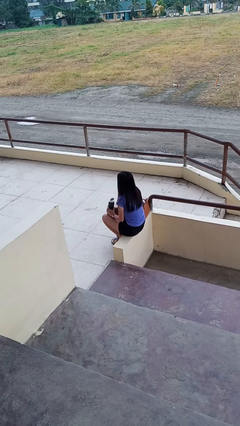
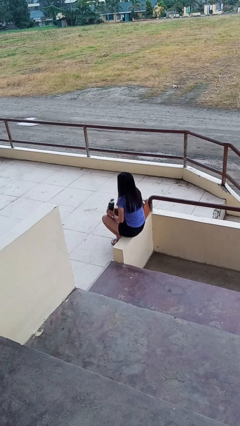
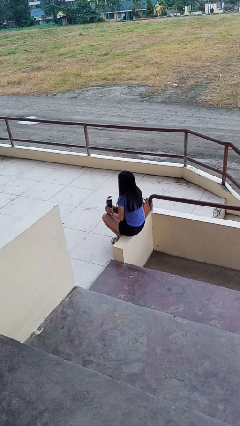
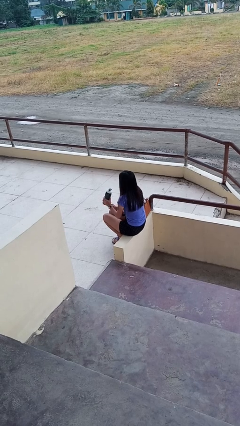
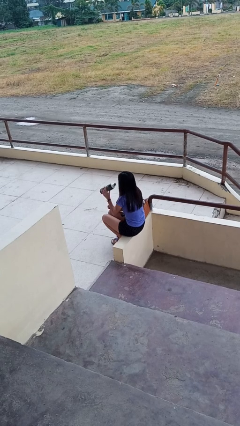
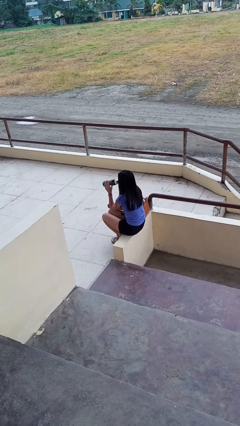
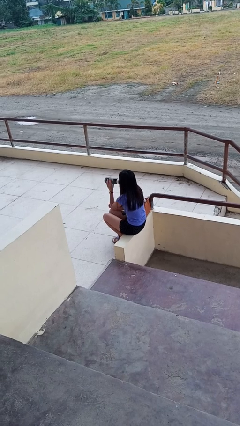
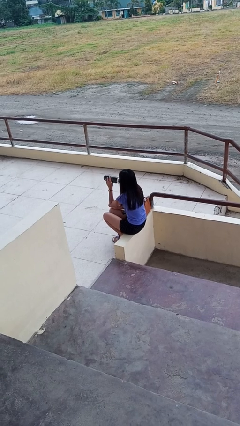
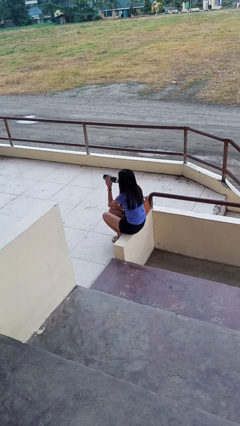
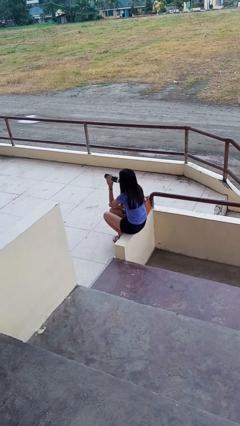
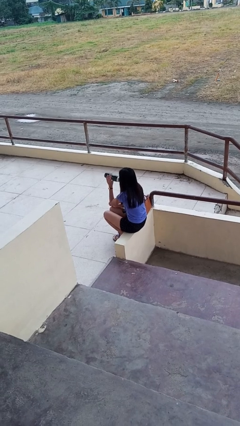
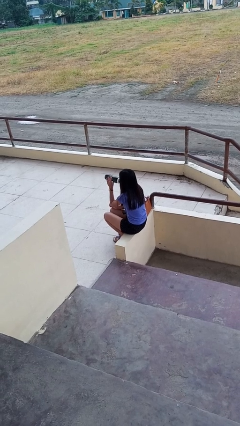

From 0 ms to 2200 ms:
person drinks from bottle

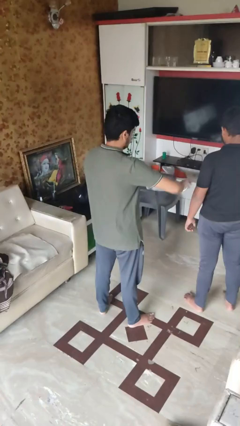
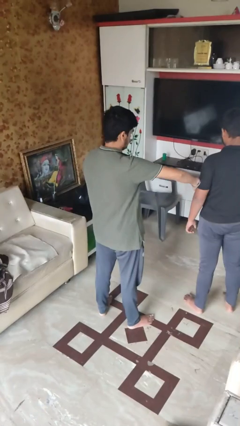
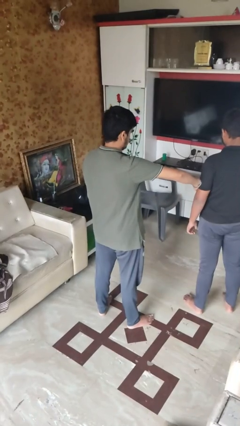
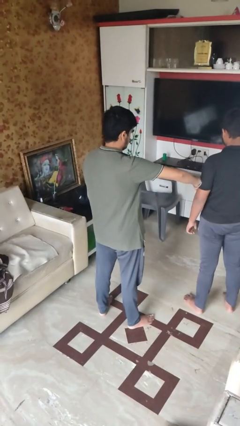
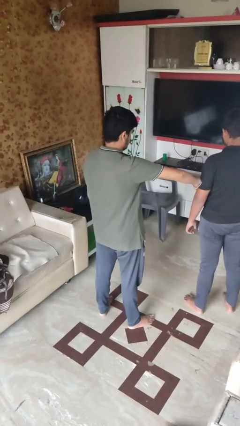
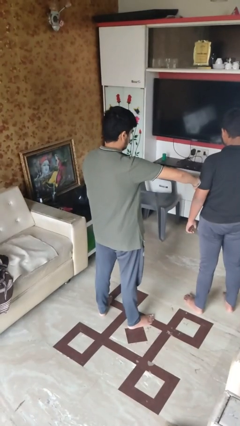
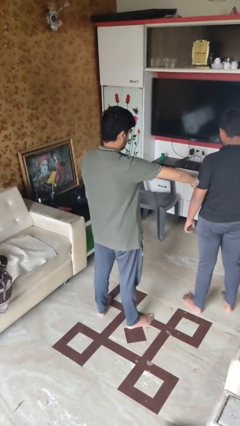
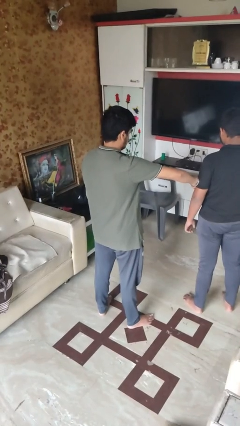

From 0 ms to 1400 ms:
person grabs person by bicep

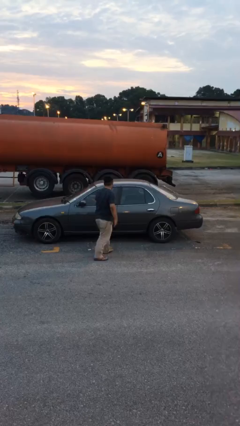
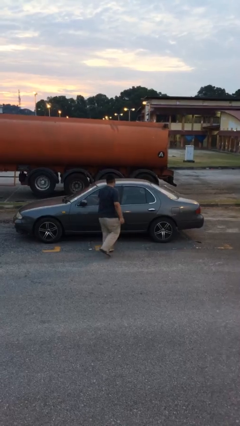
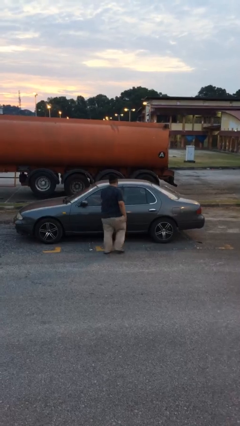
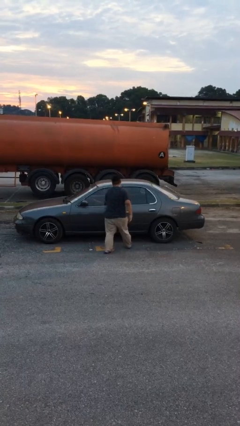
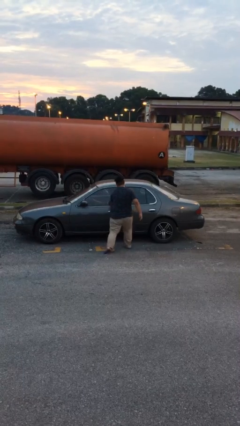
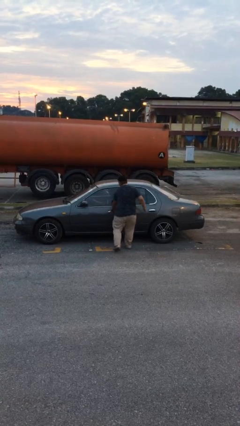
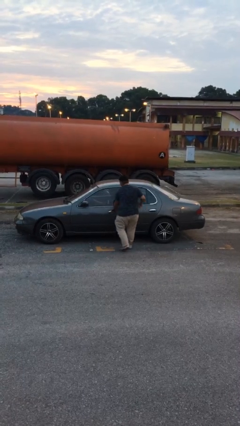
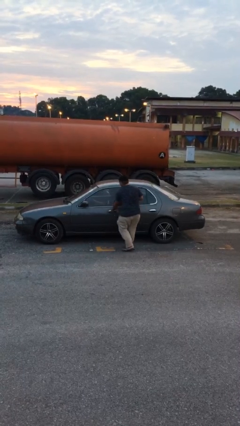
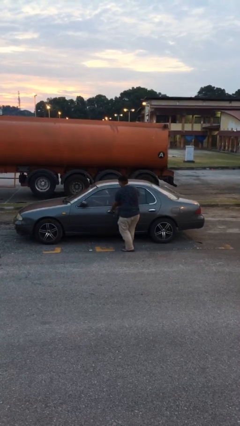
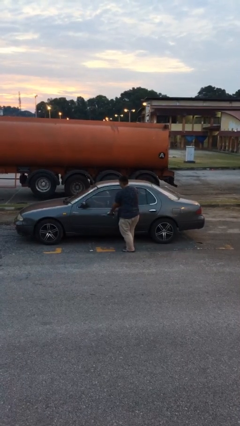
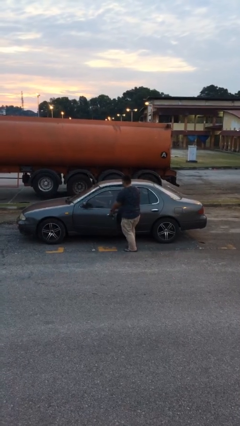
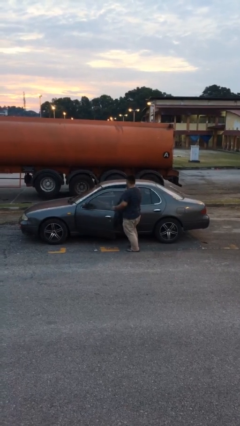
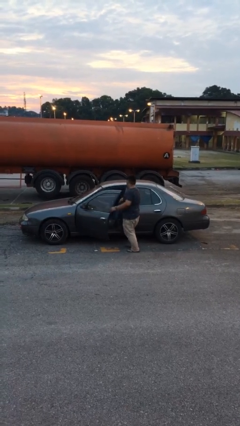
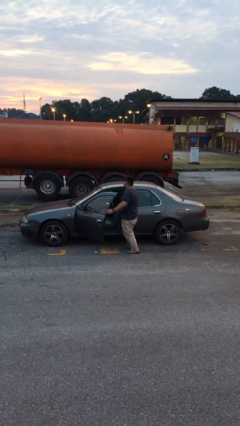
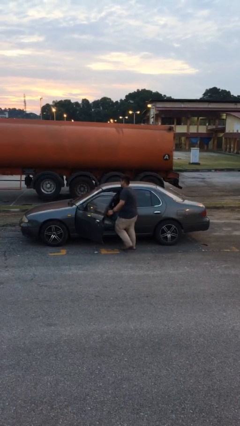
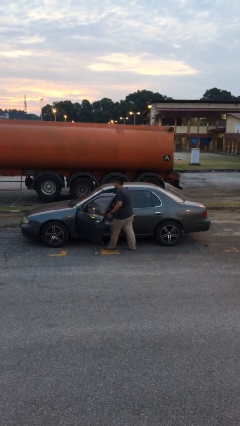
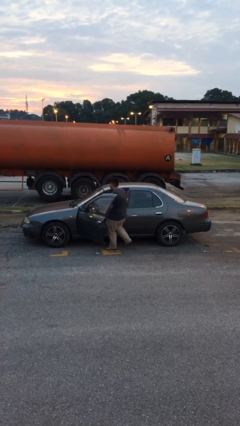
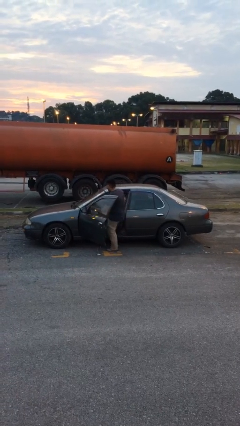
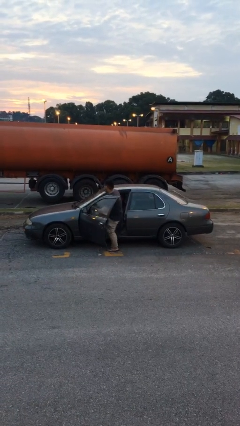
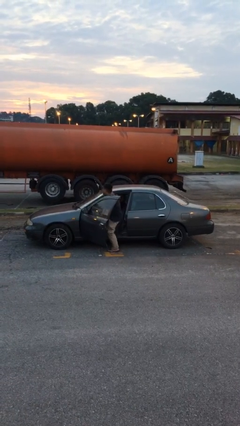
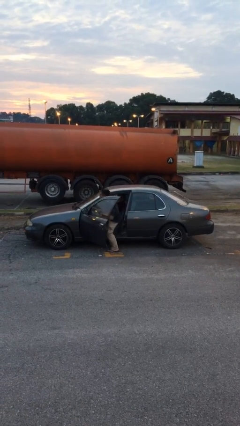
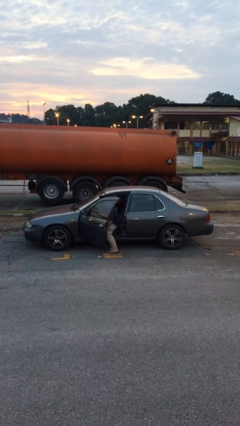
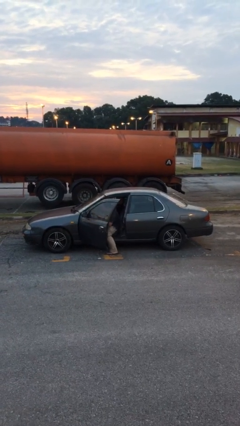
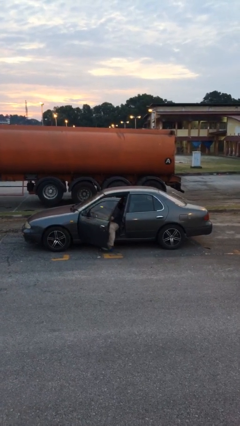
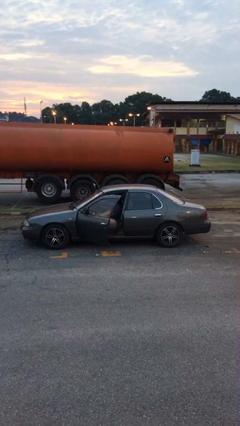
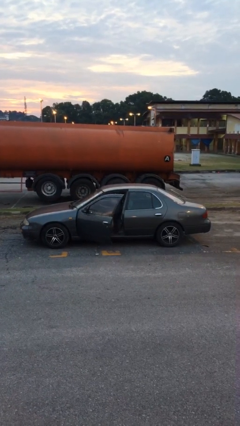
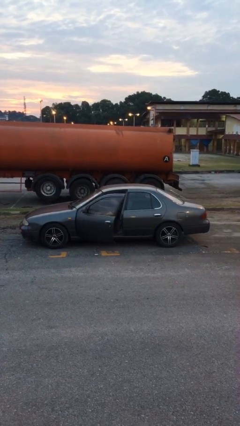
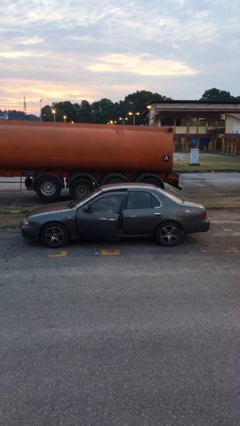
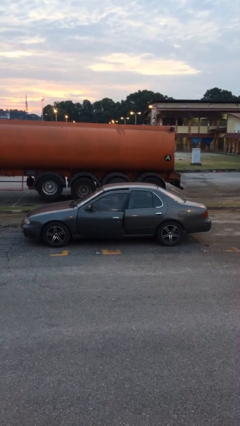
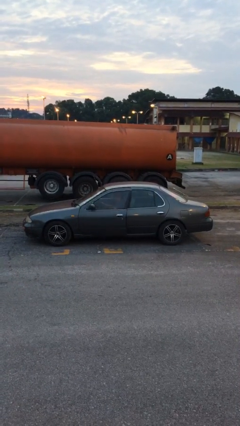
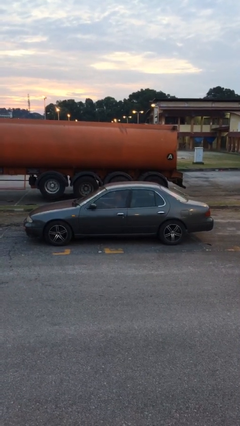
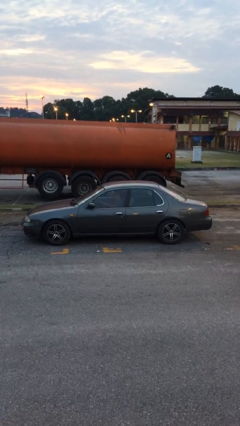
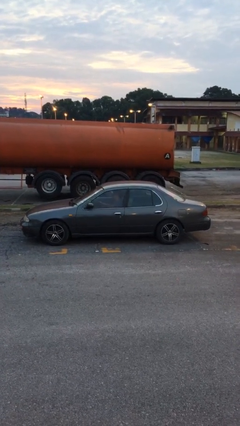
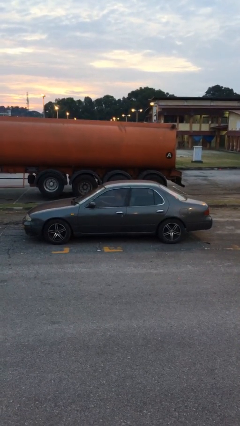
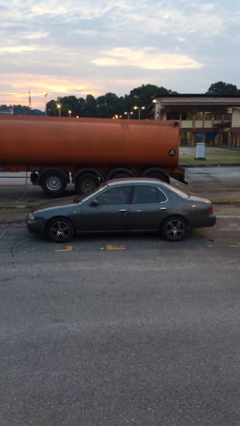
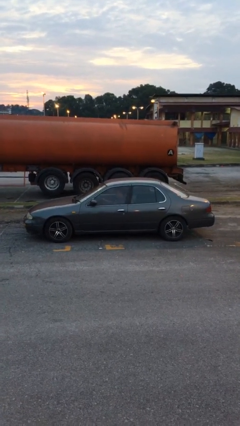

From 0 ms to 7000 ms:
car picks up person

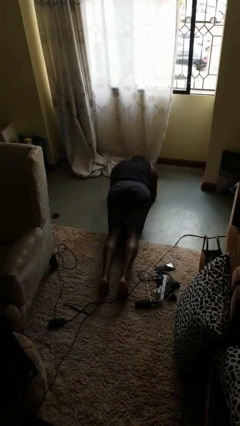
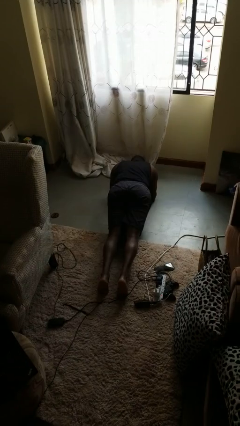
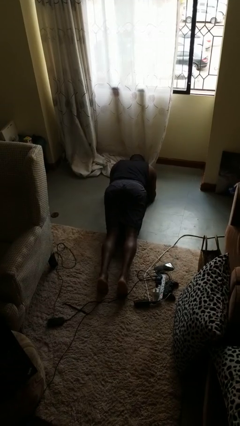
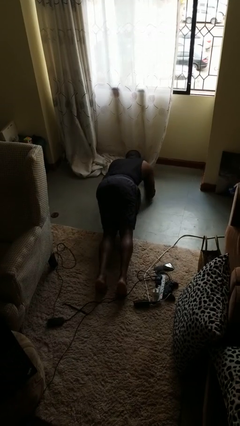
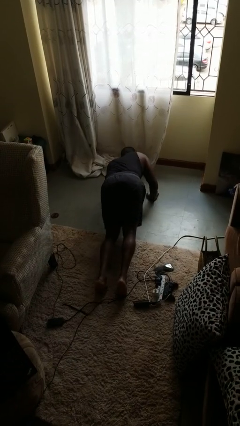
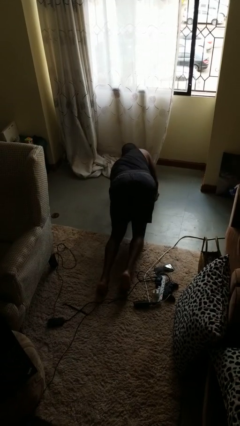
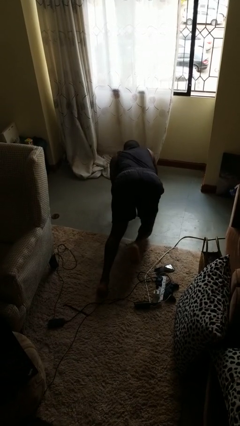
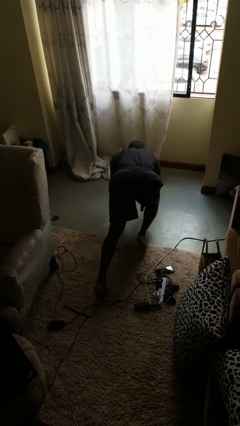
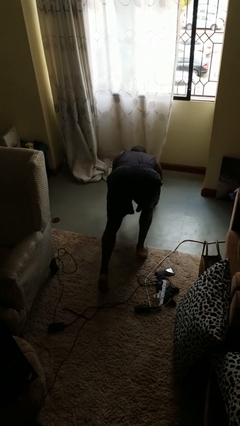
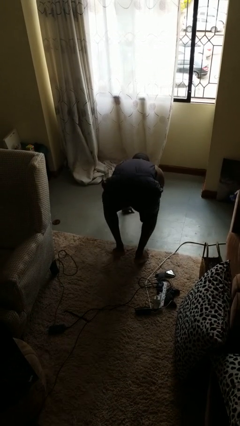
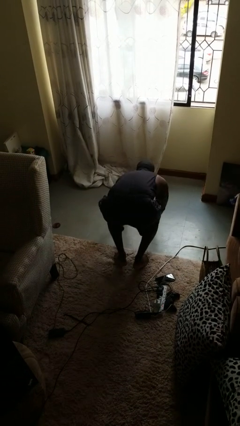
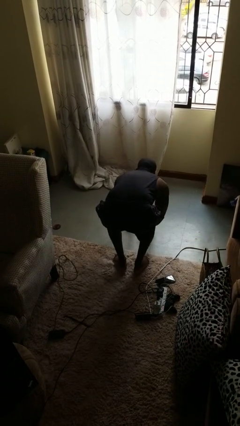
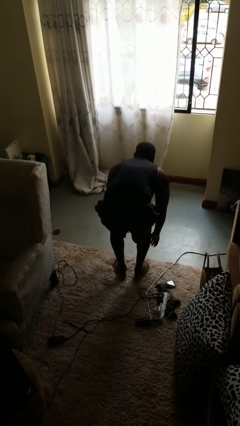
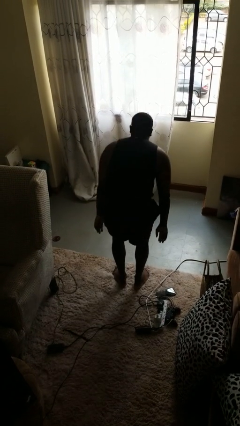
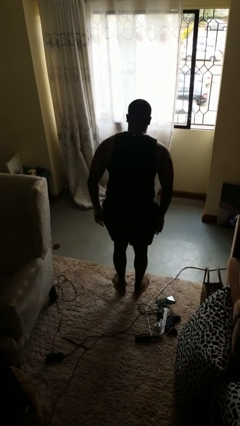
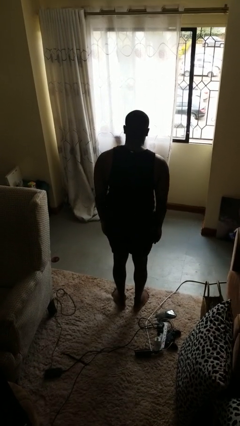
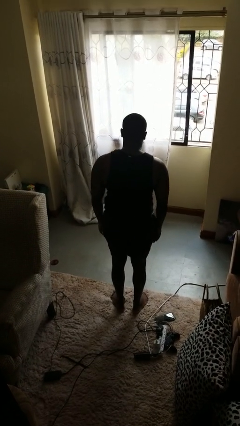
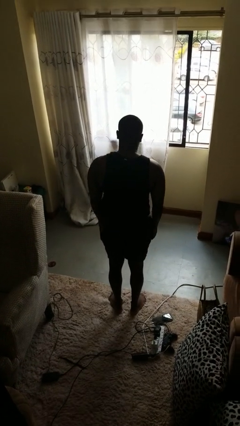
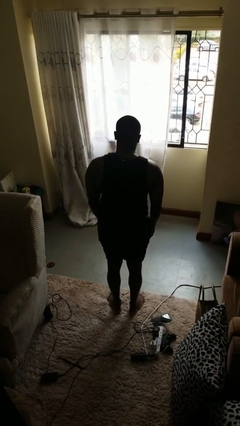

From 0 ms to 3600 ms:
person stands up from floor

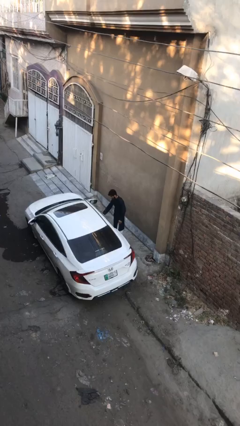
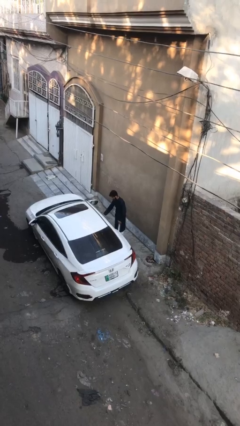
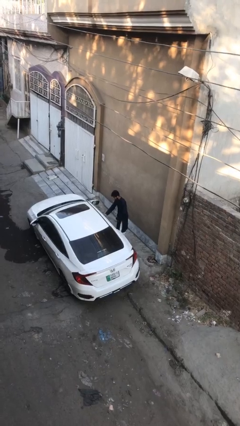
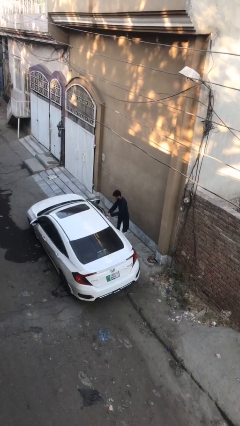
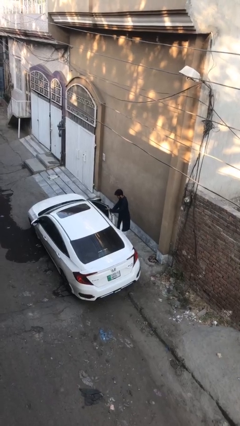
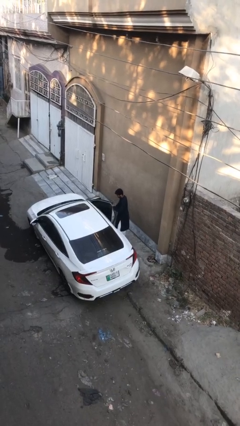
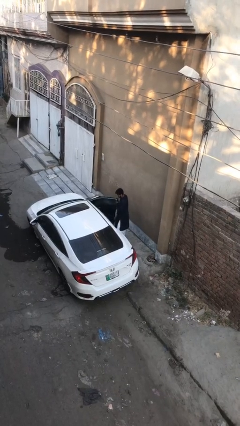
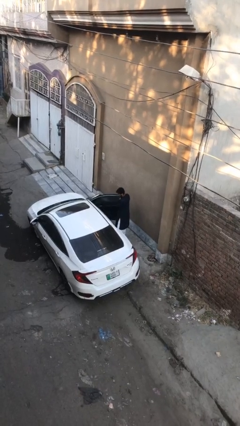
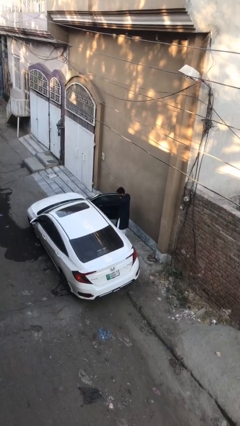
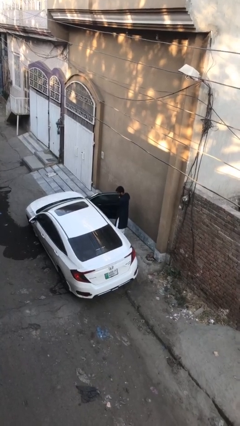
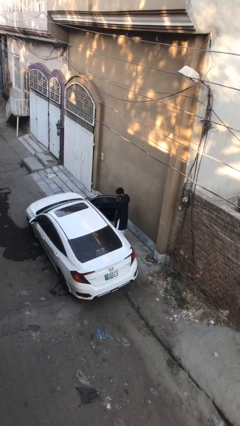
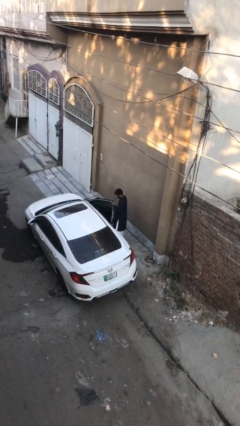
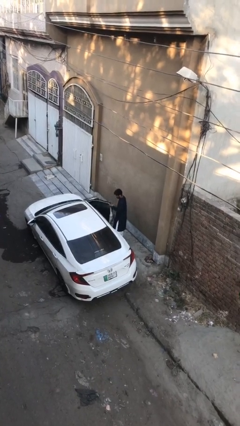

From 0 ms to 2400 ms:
person opens car door

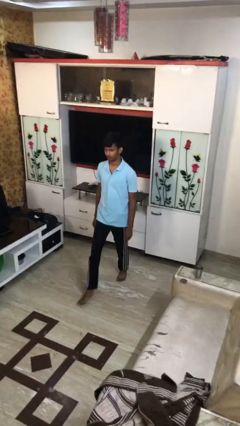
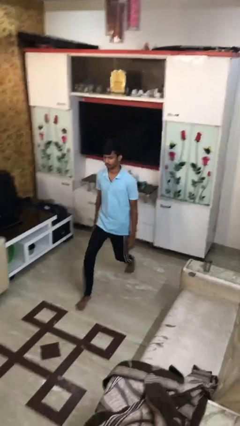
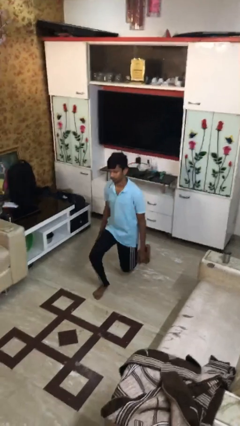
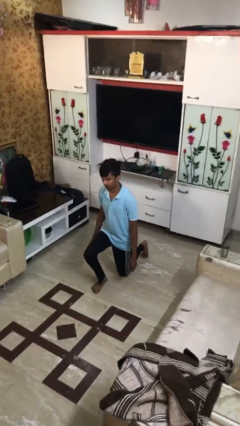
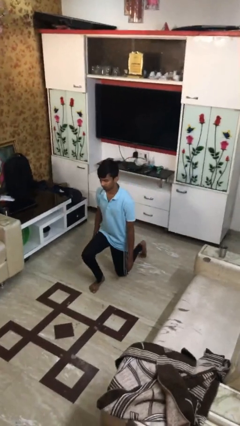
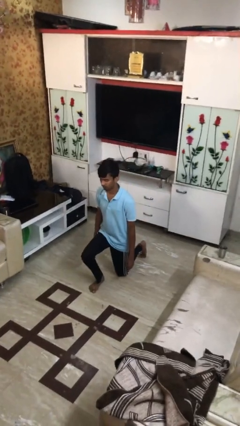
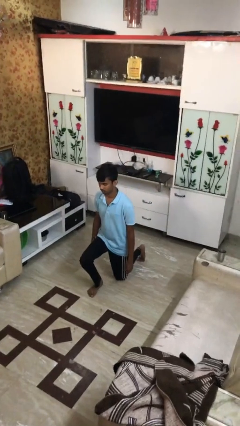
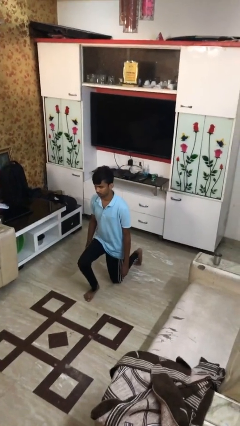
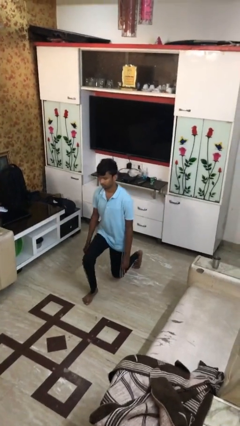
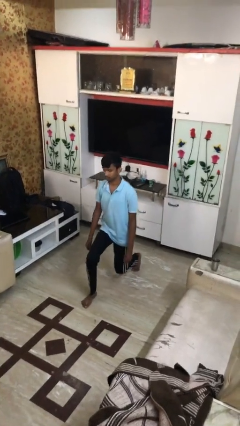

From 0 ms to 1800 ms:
person exercises with lunges
